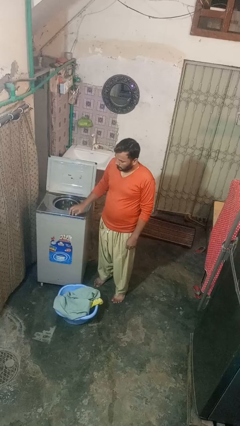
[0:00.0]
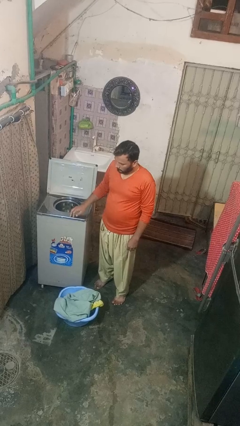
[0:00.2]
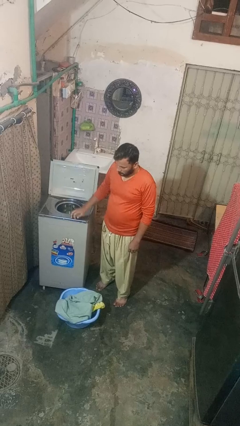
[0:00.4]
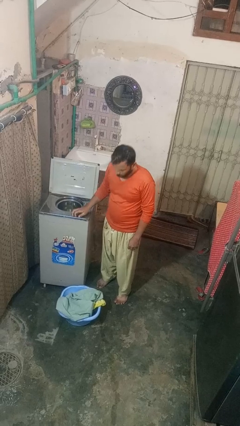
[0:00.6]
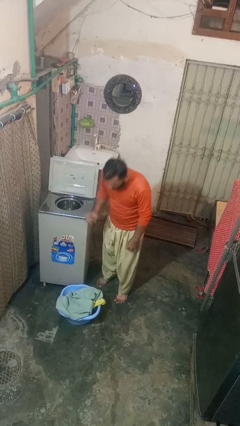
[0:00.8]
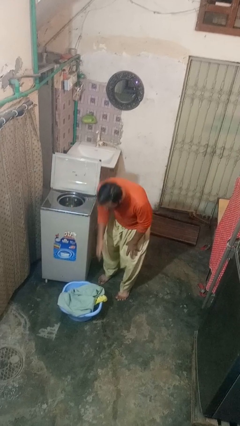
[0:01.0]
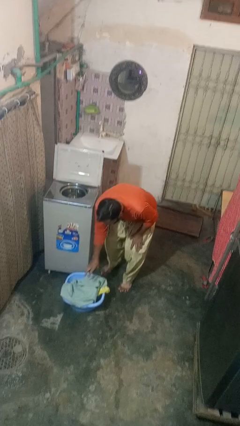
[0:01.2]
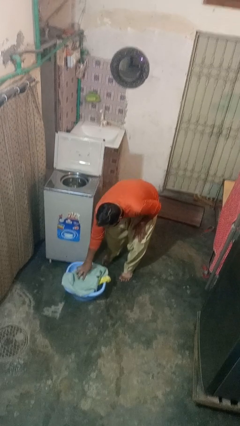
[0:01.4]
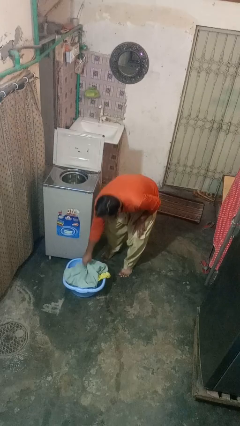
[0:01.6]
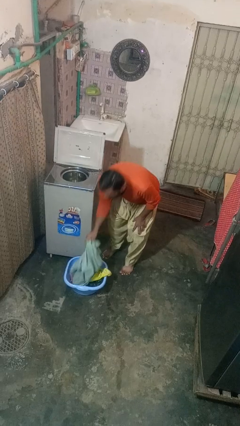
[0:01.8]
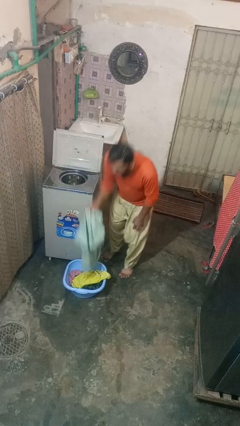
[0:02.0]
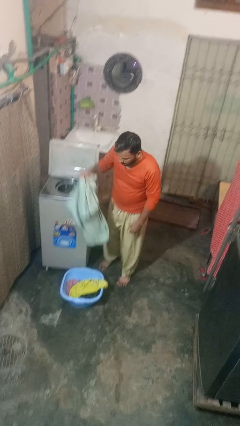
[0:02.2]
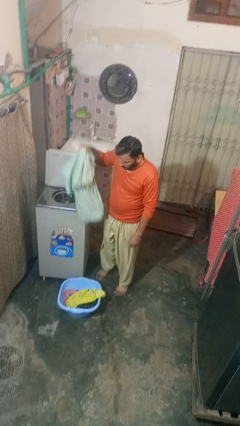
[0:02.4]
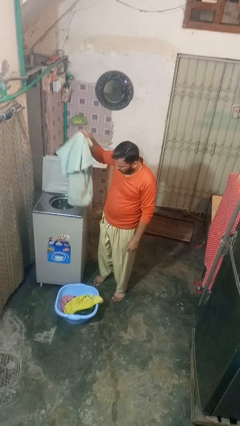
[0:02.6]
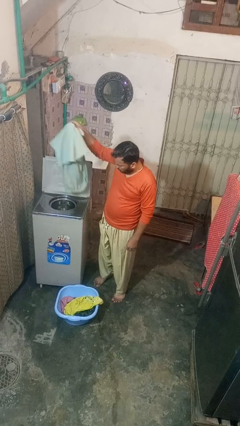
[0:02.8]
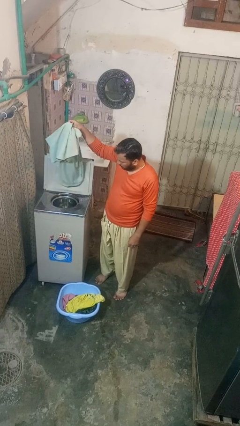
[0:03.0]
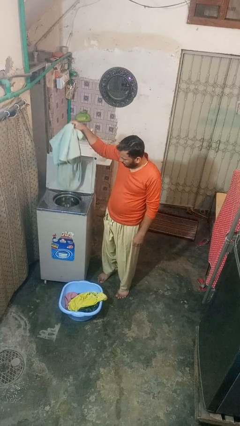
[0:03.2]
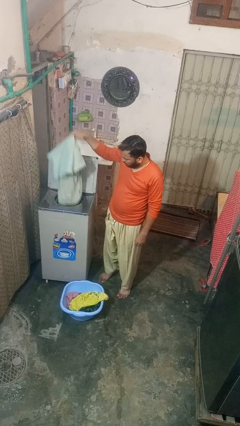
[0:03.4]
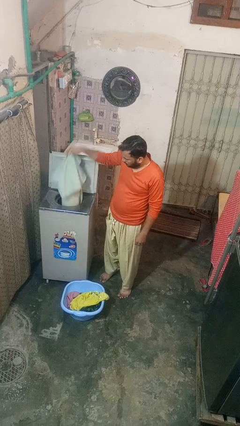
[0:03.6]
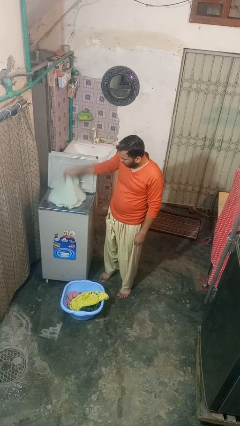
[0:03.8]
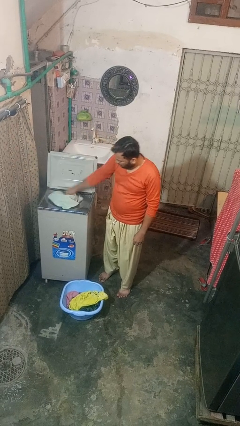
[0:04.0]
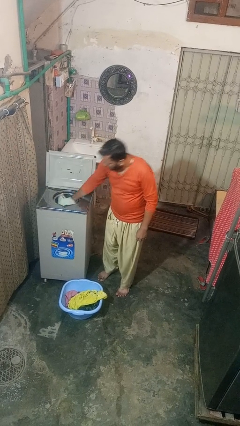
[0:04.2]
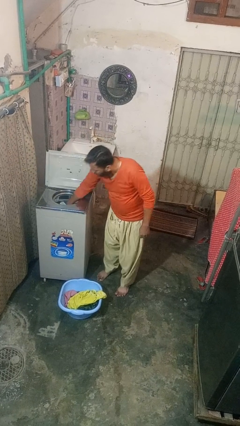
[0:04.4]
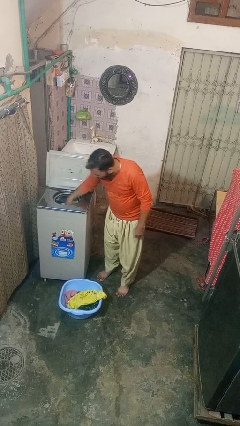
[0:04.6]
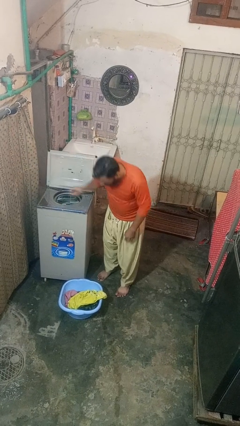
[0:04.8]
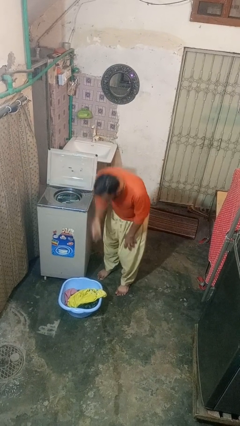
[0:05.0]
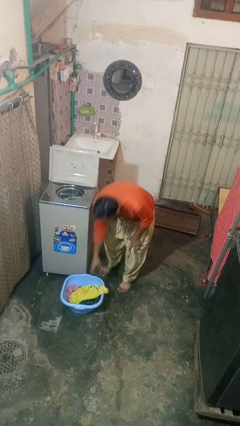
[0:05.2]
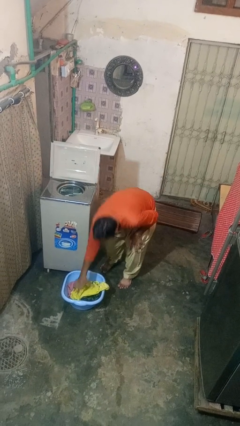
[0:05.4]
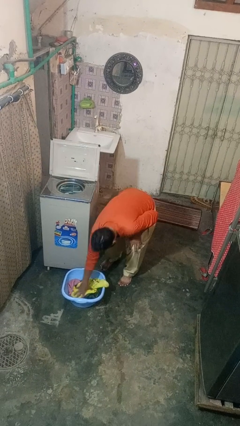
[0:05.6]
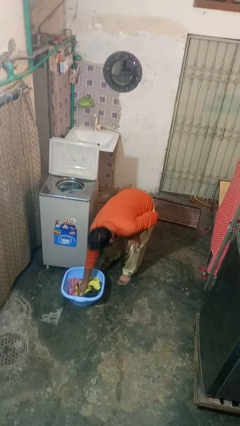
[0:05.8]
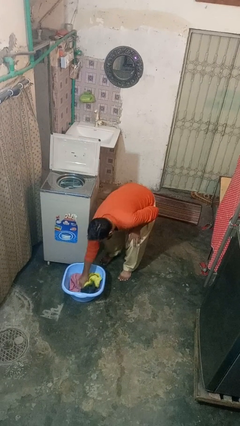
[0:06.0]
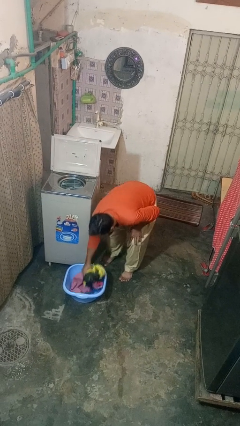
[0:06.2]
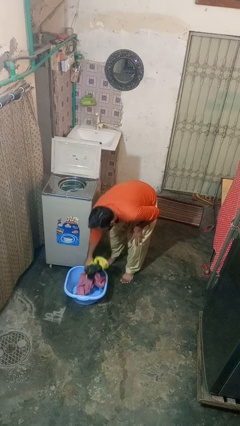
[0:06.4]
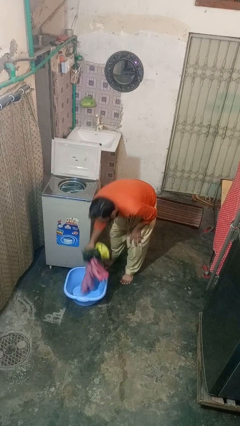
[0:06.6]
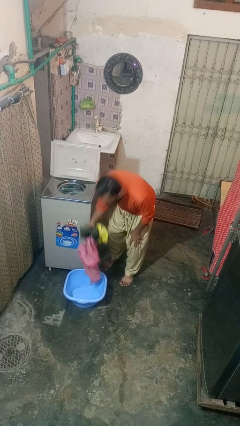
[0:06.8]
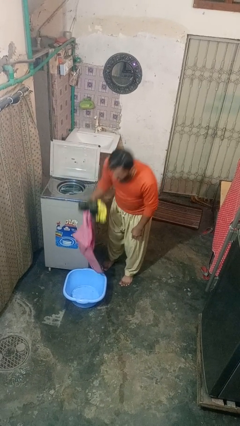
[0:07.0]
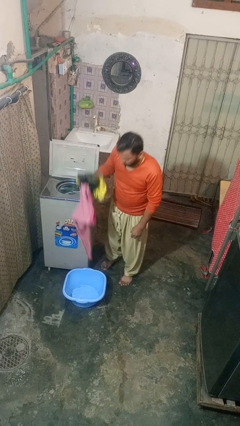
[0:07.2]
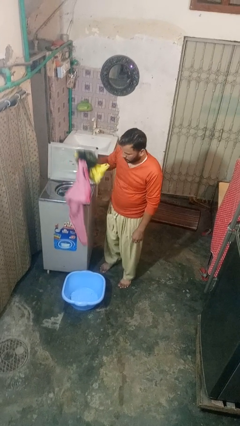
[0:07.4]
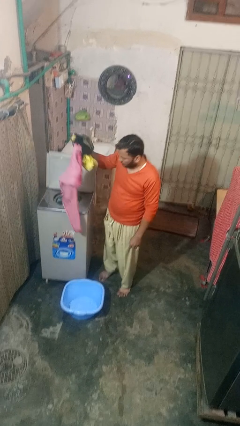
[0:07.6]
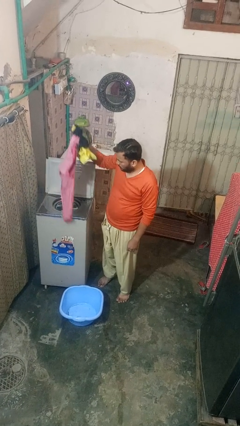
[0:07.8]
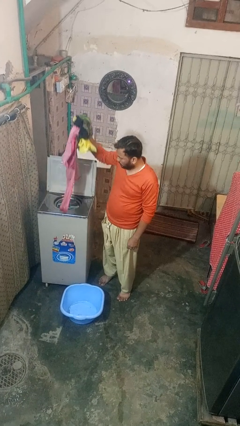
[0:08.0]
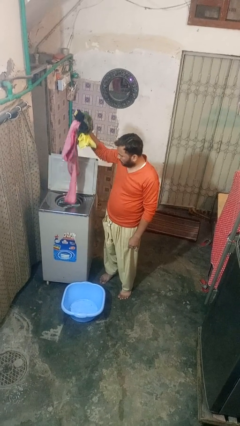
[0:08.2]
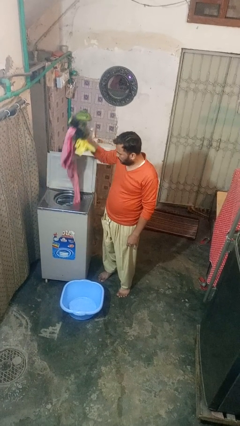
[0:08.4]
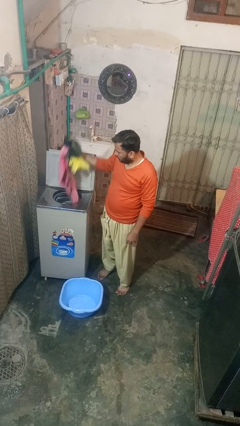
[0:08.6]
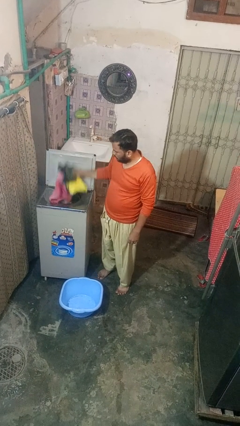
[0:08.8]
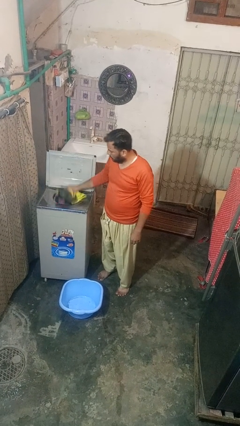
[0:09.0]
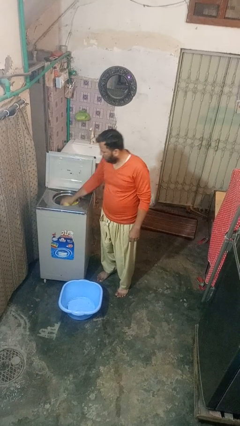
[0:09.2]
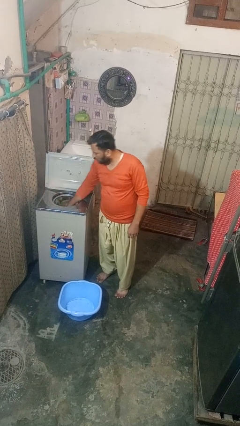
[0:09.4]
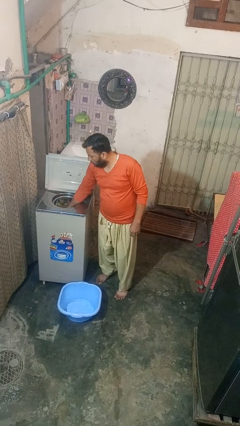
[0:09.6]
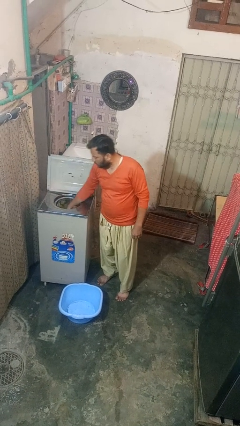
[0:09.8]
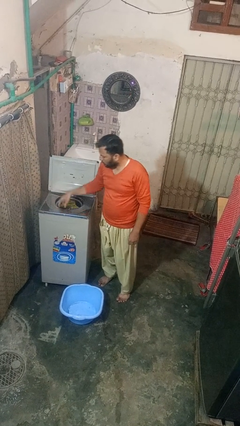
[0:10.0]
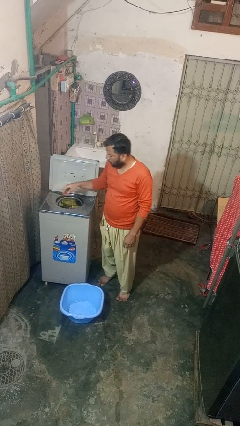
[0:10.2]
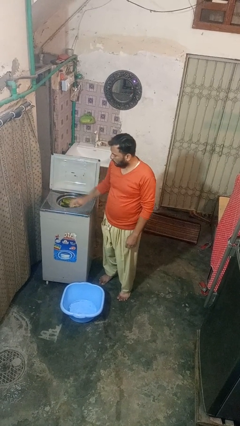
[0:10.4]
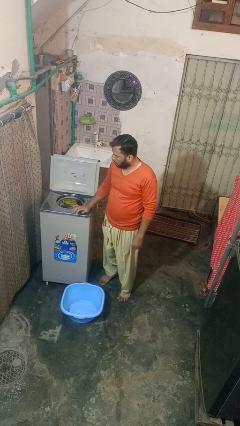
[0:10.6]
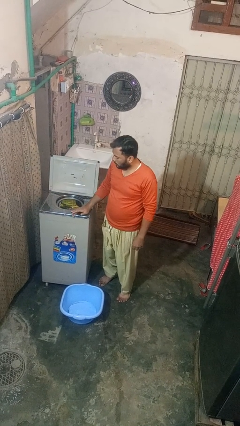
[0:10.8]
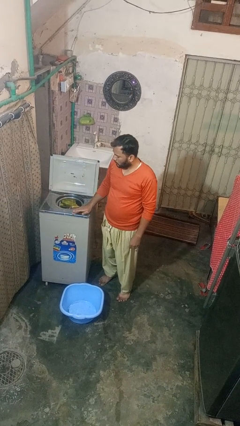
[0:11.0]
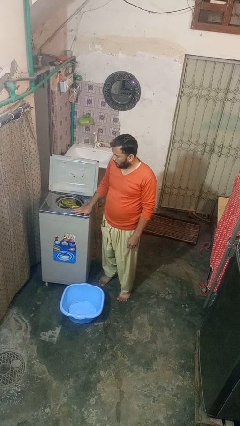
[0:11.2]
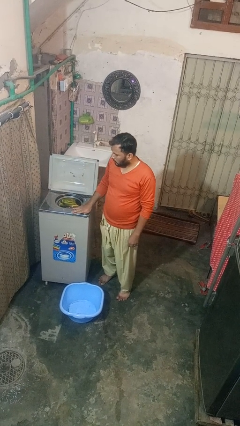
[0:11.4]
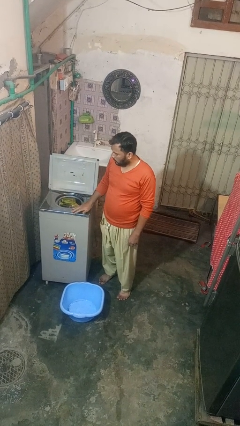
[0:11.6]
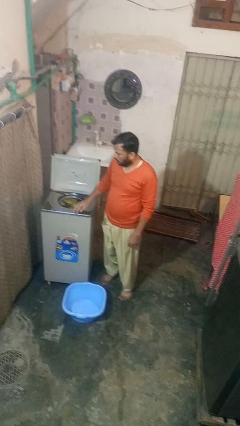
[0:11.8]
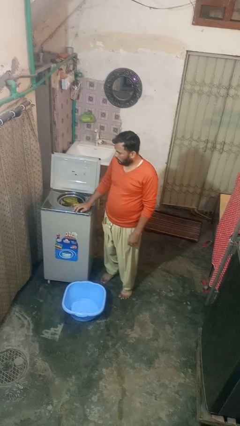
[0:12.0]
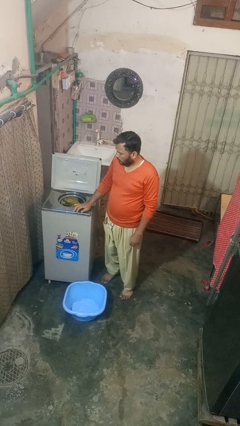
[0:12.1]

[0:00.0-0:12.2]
person loads dryer

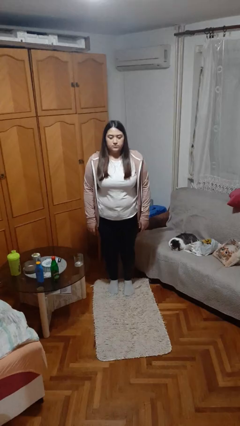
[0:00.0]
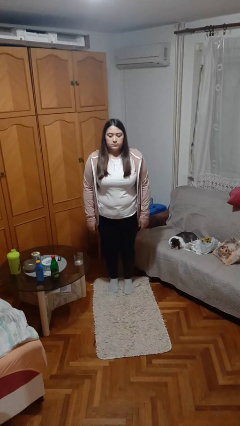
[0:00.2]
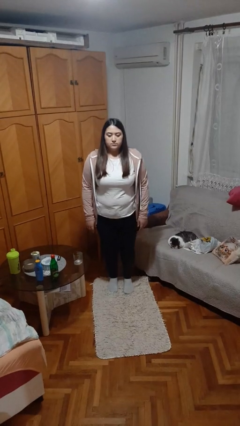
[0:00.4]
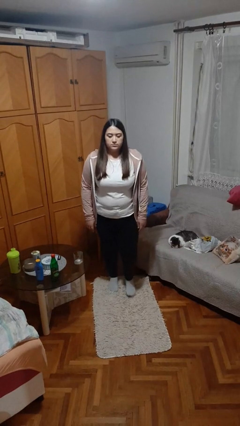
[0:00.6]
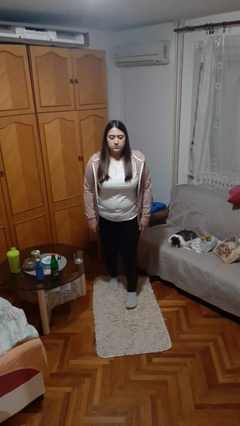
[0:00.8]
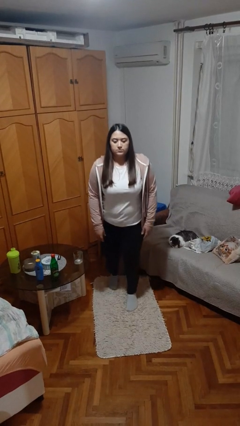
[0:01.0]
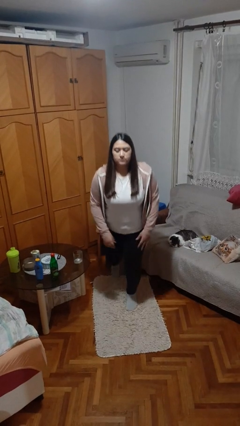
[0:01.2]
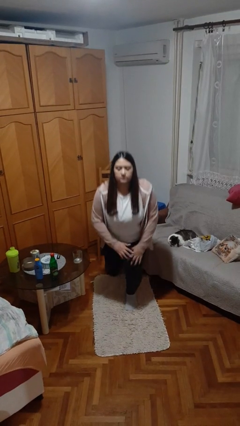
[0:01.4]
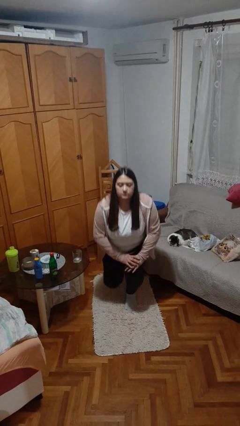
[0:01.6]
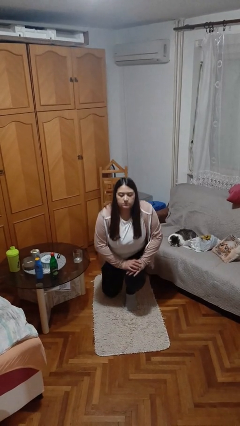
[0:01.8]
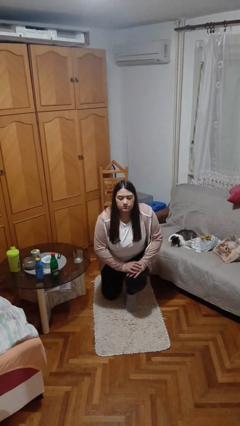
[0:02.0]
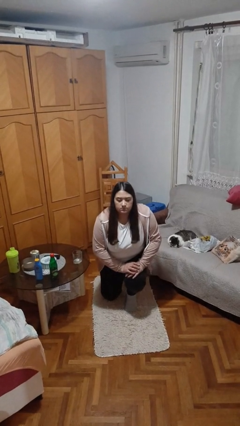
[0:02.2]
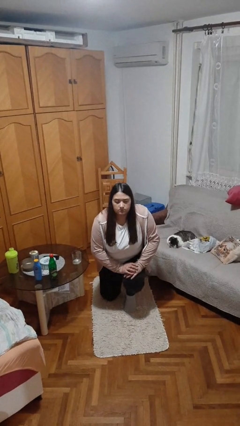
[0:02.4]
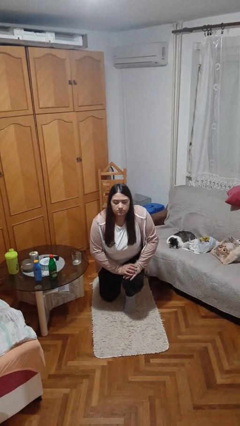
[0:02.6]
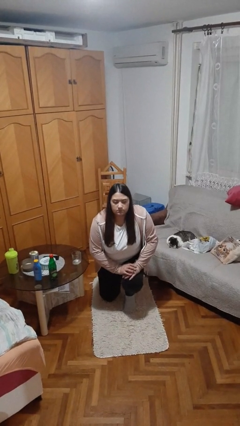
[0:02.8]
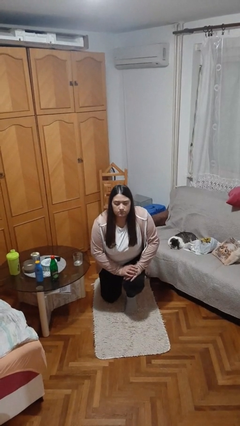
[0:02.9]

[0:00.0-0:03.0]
person kneels

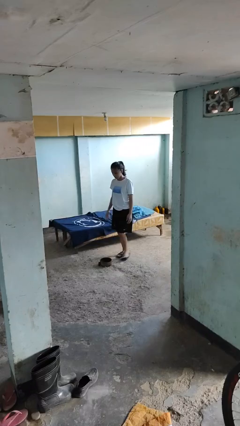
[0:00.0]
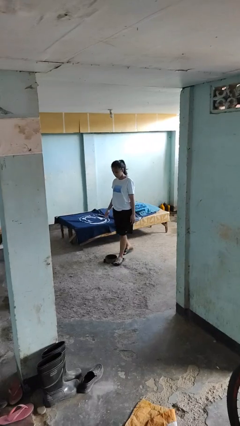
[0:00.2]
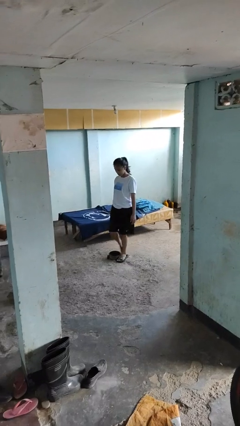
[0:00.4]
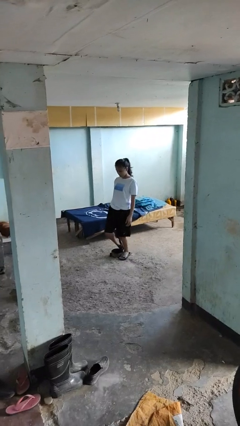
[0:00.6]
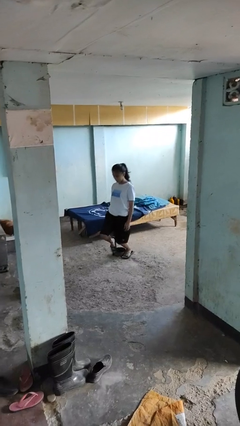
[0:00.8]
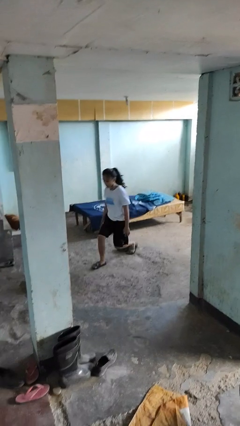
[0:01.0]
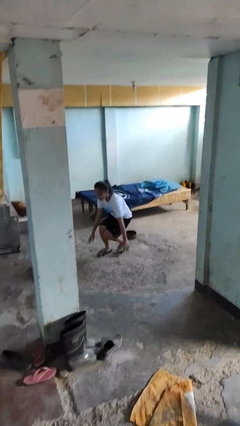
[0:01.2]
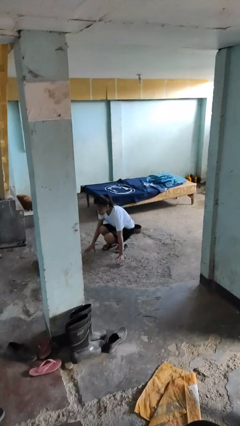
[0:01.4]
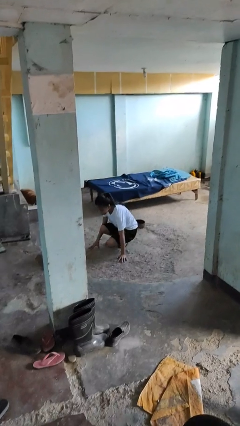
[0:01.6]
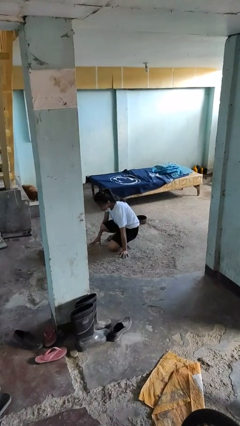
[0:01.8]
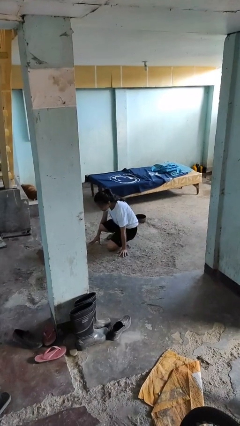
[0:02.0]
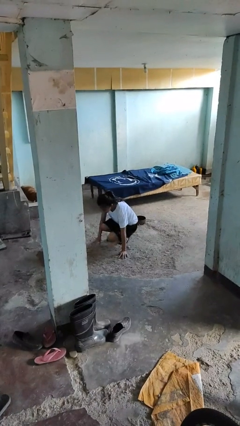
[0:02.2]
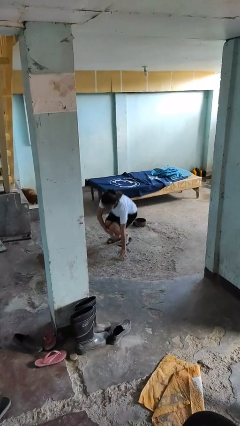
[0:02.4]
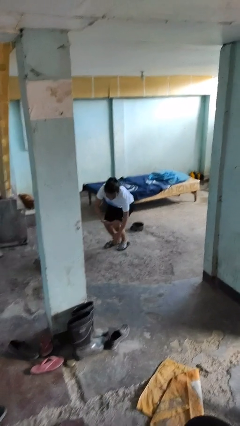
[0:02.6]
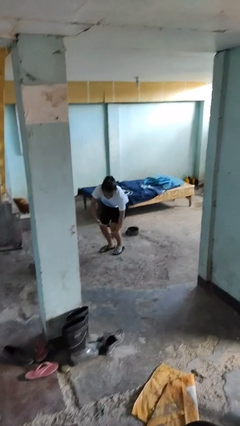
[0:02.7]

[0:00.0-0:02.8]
person trips on object on floor
